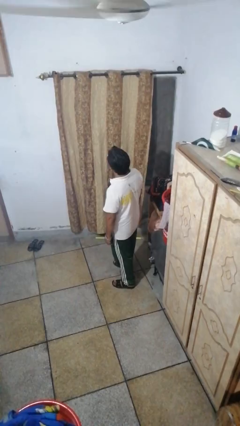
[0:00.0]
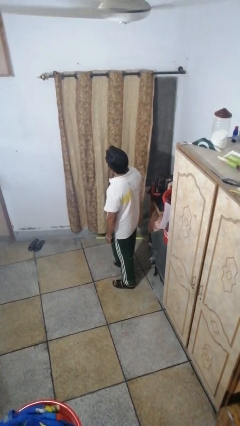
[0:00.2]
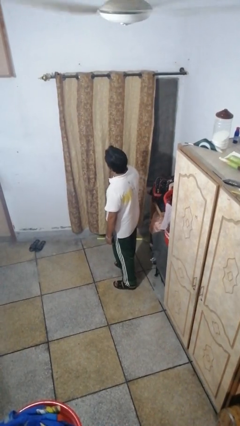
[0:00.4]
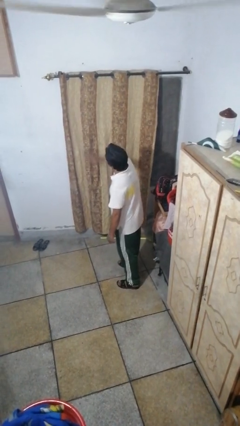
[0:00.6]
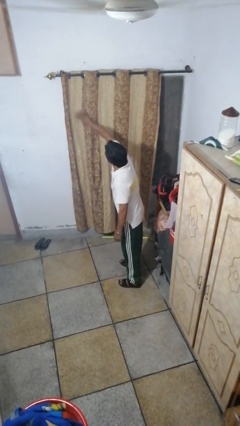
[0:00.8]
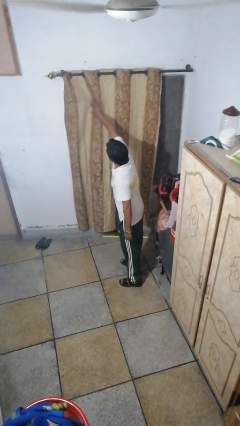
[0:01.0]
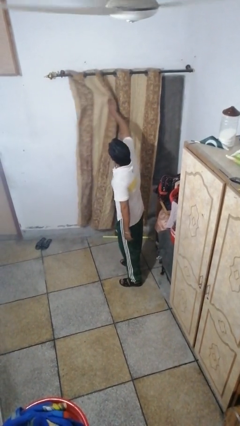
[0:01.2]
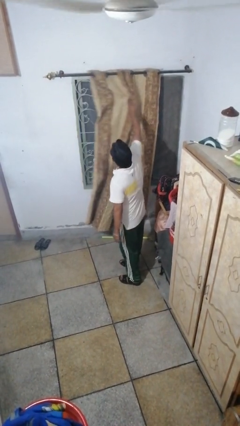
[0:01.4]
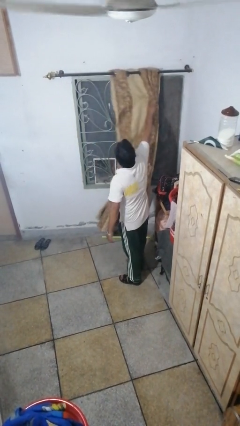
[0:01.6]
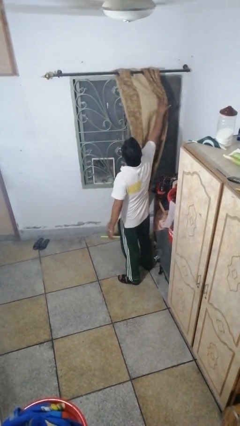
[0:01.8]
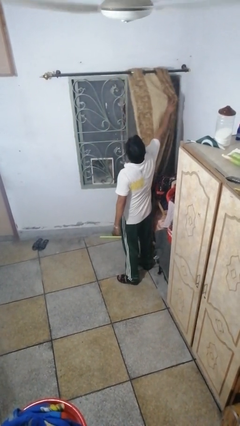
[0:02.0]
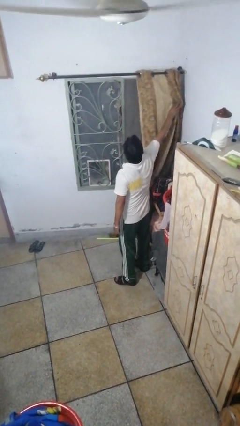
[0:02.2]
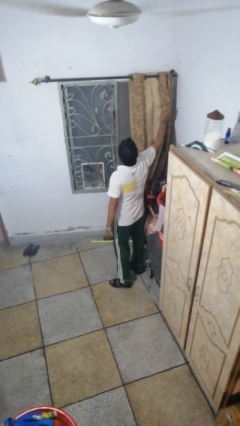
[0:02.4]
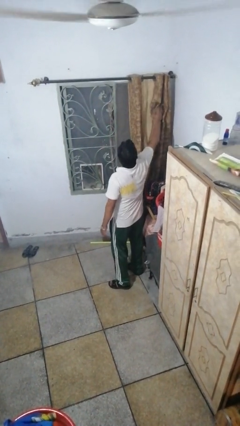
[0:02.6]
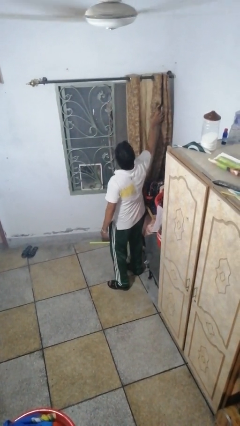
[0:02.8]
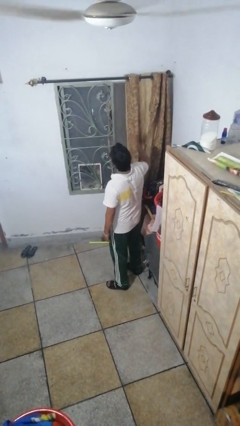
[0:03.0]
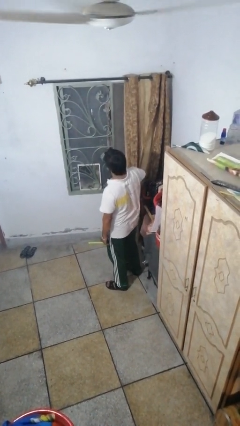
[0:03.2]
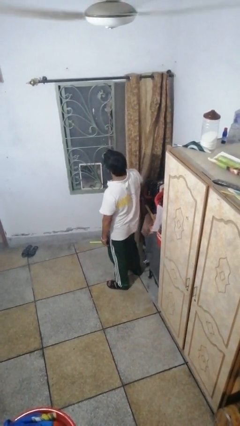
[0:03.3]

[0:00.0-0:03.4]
person opens curtains

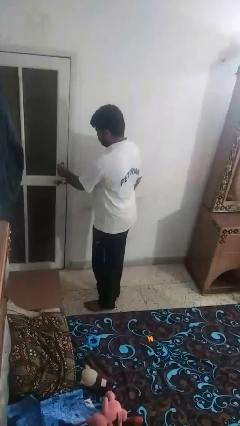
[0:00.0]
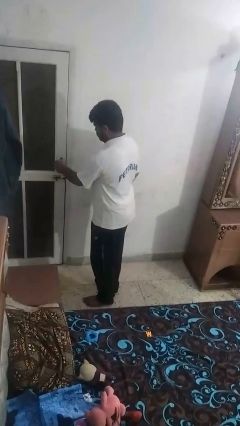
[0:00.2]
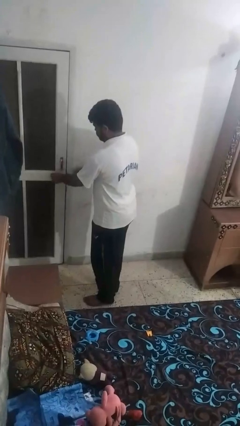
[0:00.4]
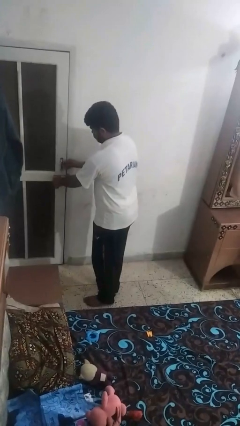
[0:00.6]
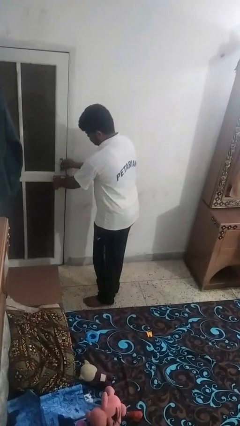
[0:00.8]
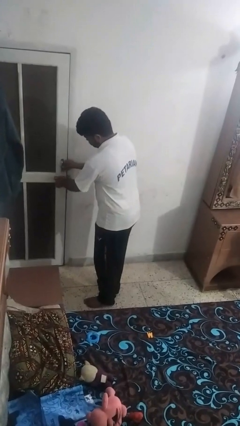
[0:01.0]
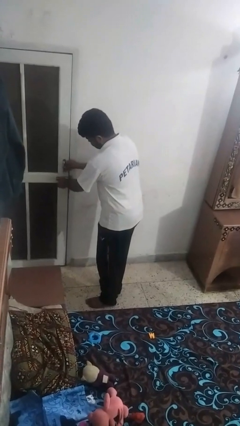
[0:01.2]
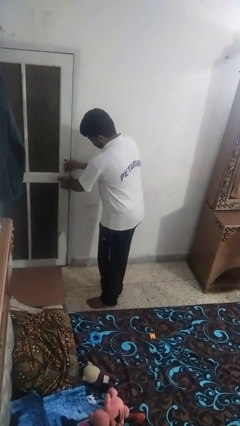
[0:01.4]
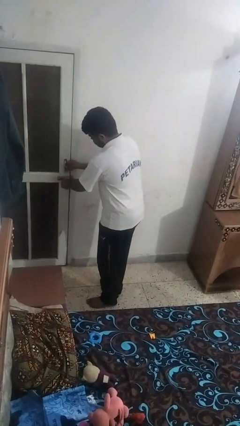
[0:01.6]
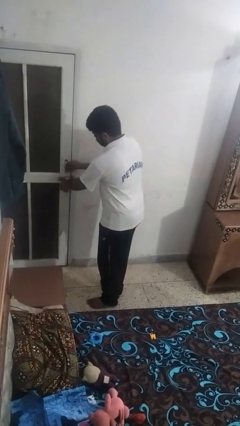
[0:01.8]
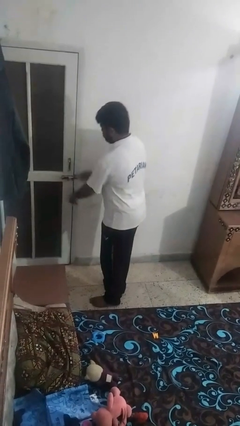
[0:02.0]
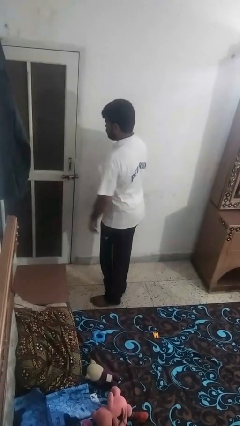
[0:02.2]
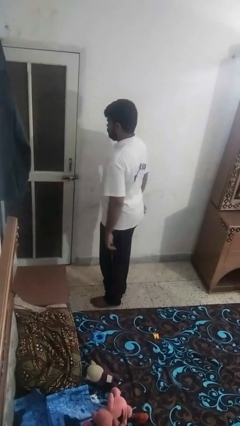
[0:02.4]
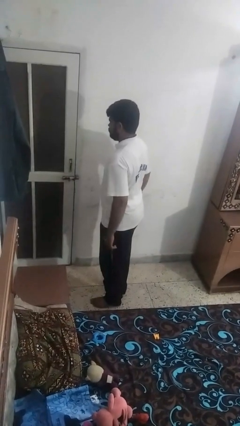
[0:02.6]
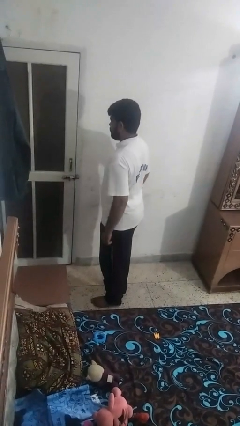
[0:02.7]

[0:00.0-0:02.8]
person locks door with keys

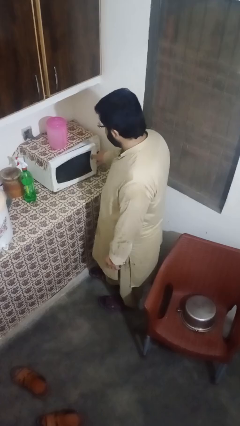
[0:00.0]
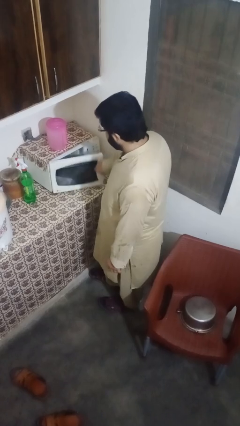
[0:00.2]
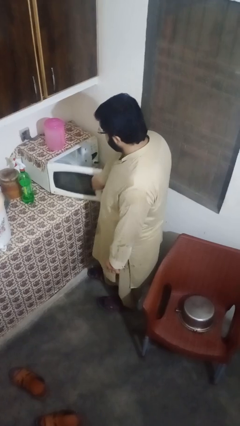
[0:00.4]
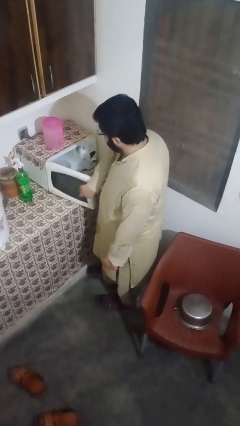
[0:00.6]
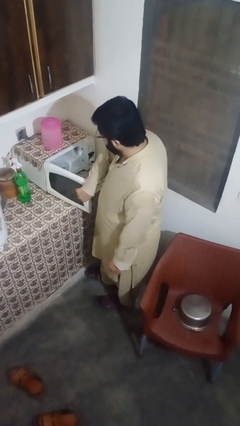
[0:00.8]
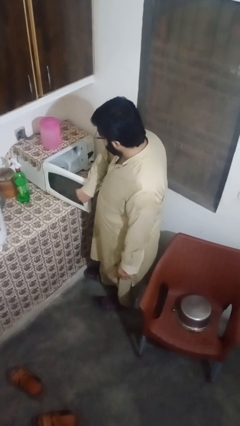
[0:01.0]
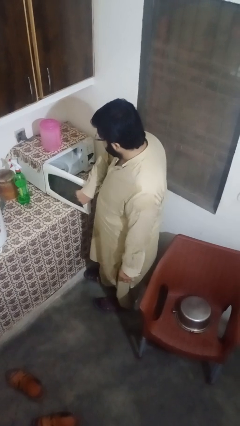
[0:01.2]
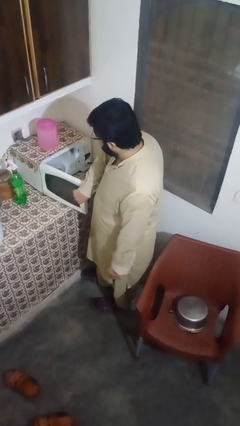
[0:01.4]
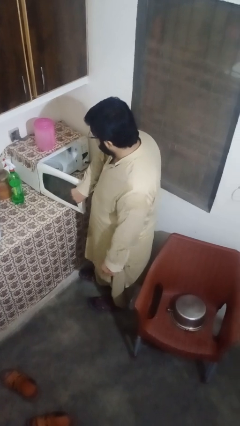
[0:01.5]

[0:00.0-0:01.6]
person opens microwave

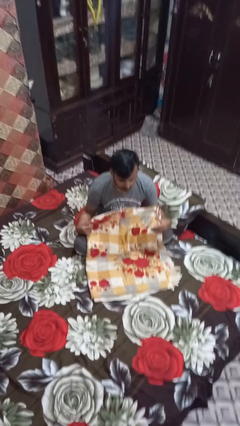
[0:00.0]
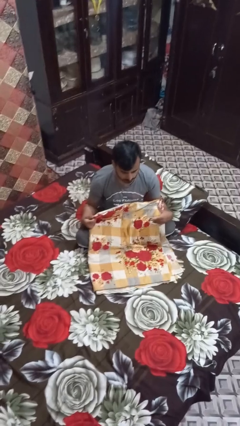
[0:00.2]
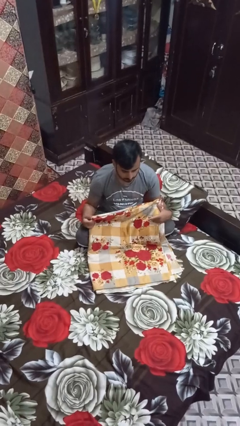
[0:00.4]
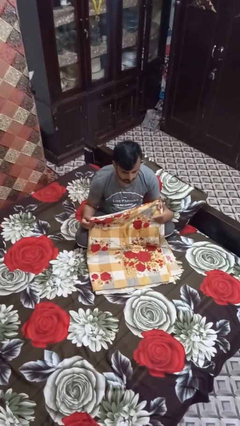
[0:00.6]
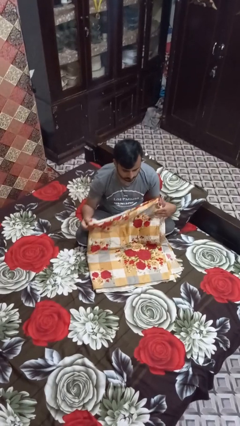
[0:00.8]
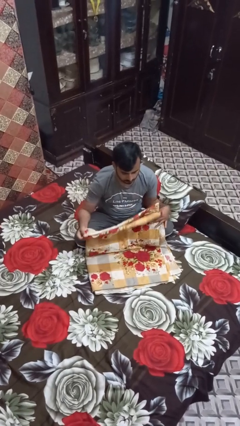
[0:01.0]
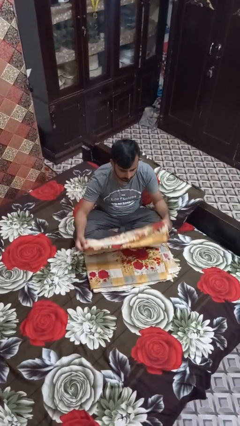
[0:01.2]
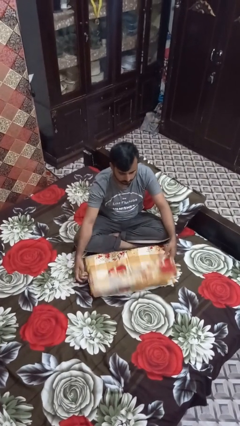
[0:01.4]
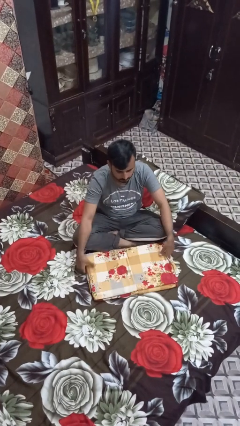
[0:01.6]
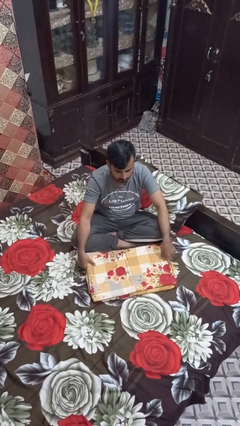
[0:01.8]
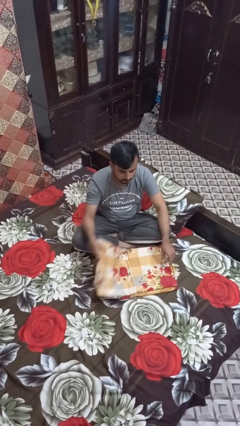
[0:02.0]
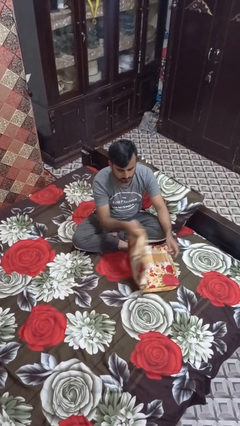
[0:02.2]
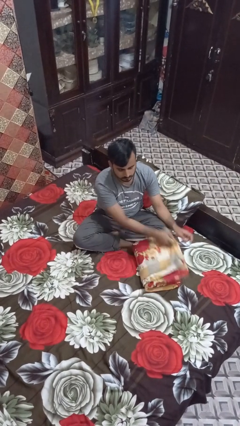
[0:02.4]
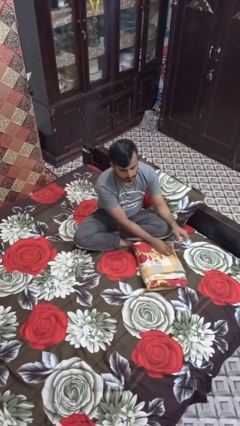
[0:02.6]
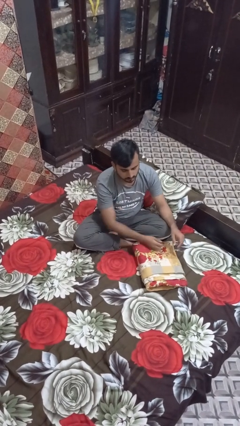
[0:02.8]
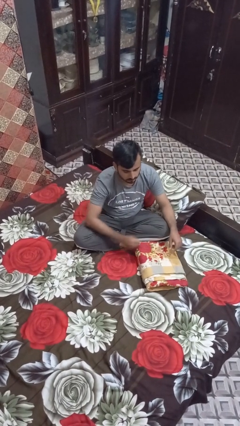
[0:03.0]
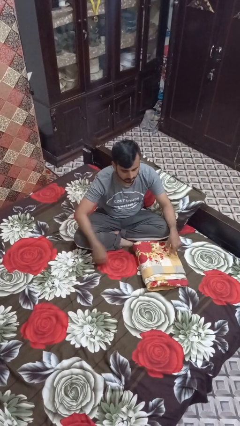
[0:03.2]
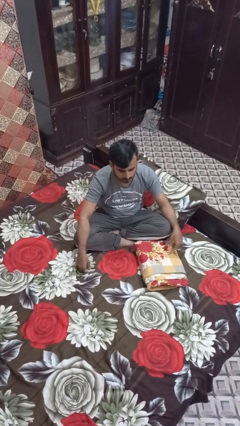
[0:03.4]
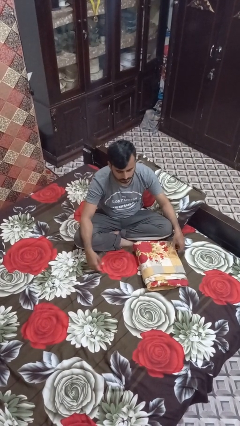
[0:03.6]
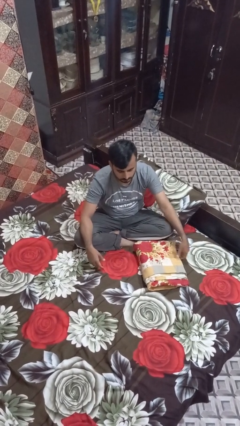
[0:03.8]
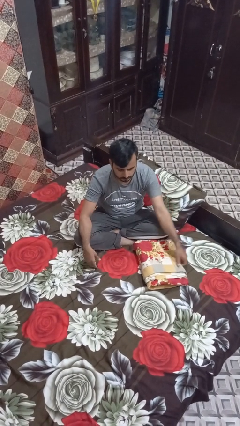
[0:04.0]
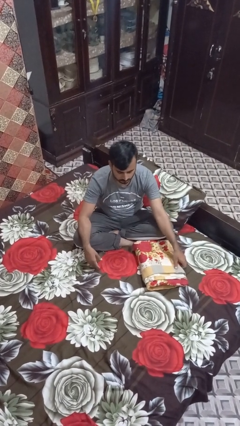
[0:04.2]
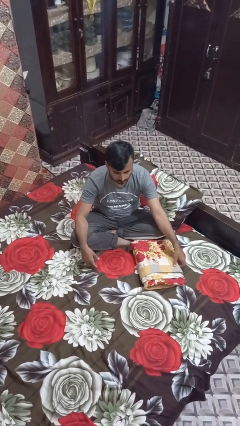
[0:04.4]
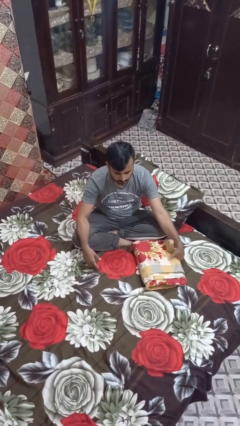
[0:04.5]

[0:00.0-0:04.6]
person folds blanket

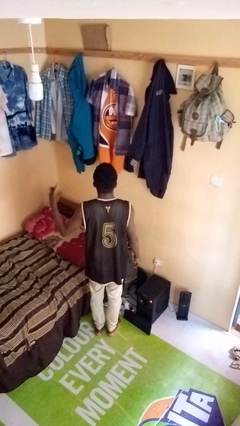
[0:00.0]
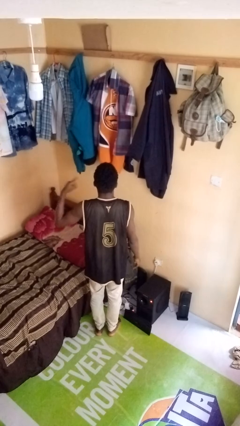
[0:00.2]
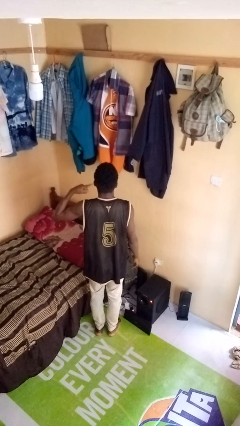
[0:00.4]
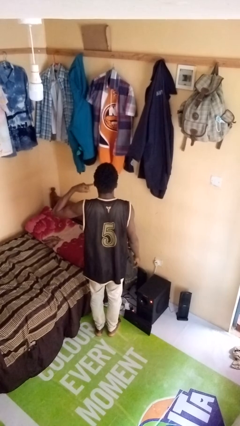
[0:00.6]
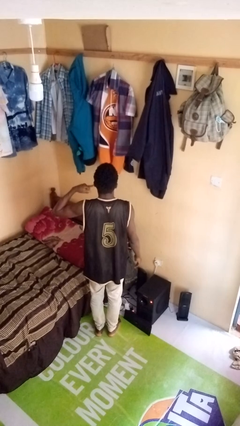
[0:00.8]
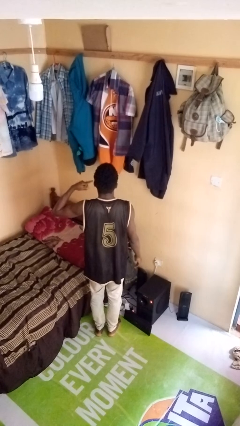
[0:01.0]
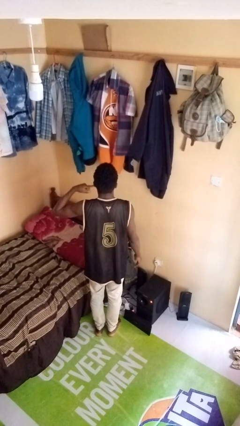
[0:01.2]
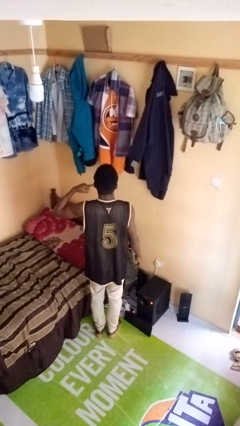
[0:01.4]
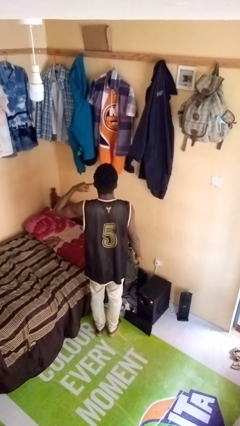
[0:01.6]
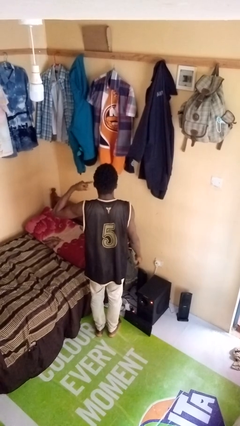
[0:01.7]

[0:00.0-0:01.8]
person gestures listen closely

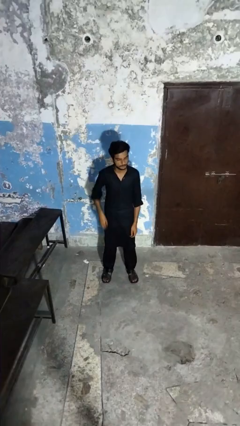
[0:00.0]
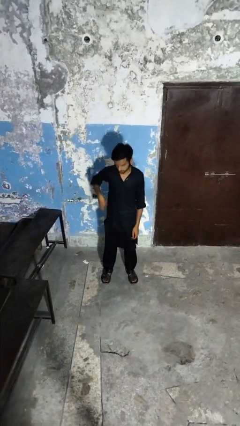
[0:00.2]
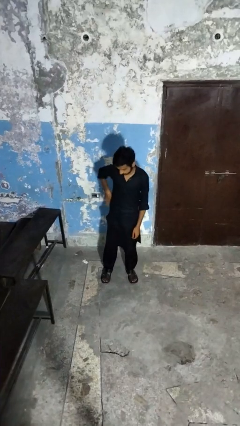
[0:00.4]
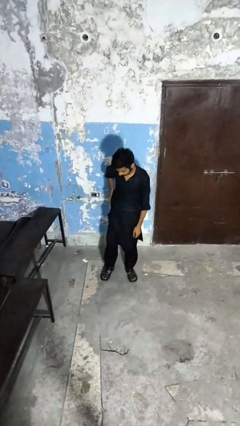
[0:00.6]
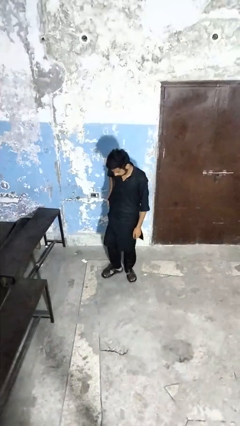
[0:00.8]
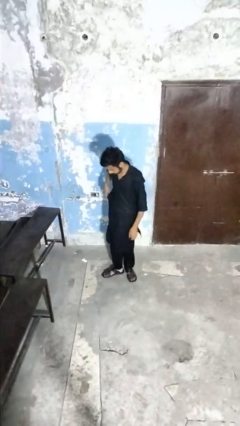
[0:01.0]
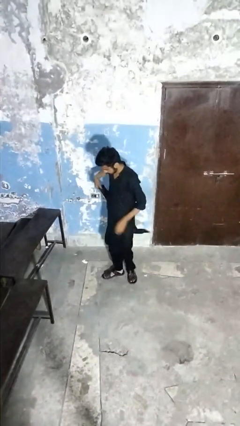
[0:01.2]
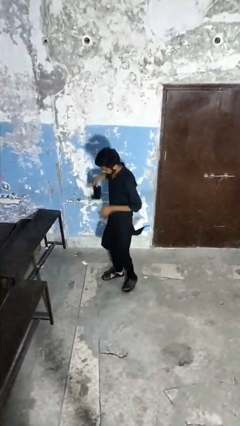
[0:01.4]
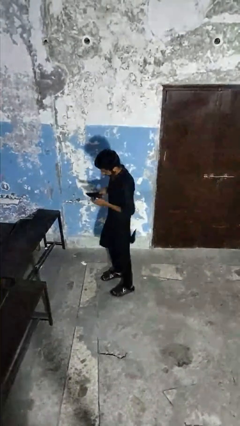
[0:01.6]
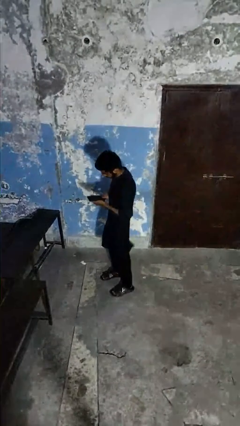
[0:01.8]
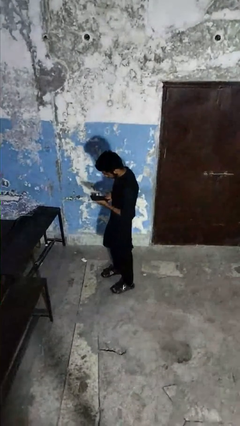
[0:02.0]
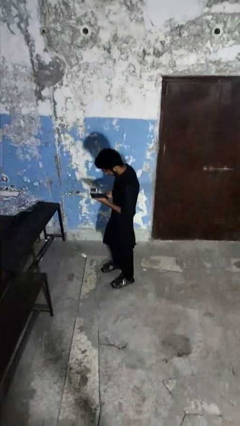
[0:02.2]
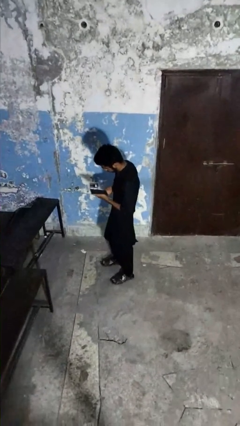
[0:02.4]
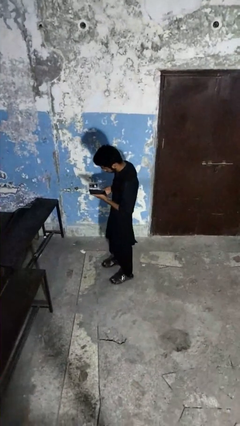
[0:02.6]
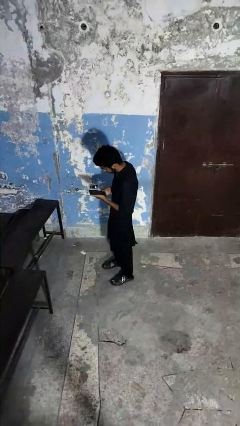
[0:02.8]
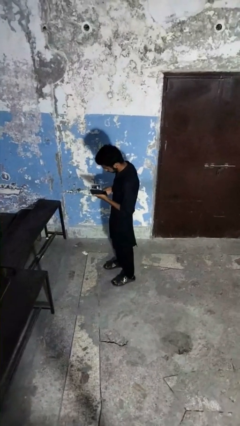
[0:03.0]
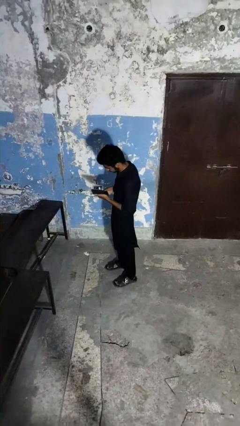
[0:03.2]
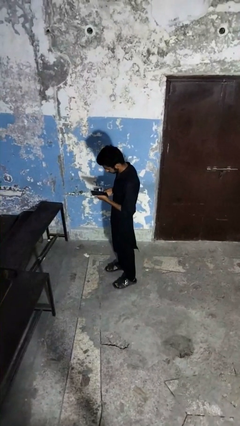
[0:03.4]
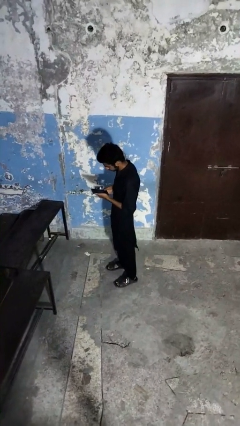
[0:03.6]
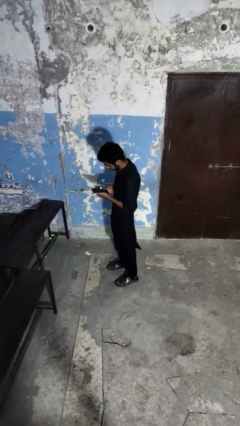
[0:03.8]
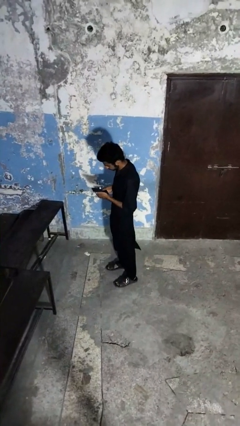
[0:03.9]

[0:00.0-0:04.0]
person takes phone from pocket
